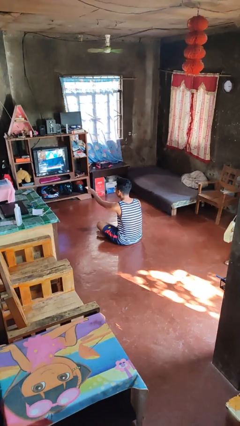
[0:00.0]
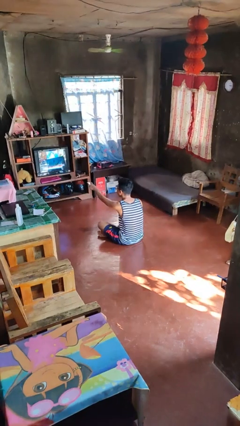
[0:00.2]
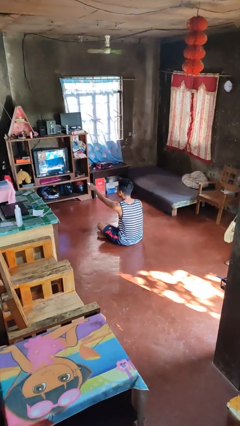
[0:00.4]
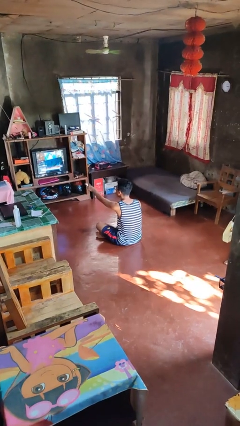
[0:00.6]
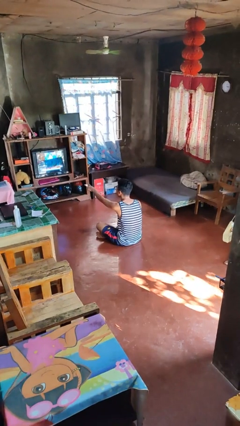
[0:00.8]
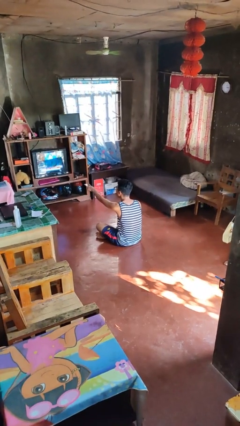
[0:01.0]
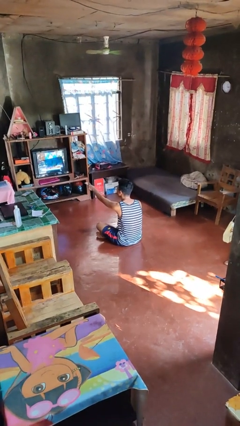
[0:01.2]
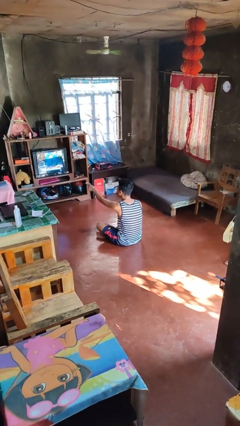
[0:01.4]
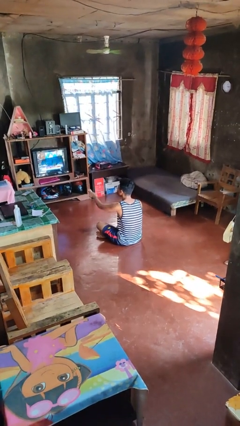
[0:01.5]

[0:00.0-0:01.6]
person uses television remote

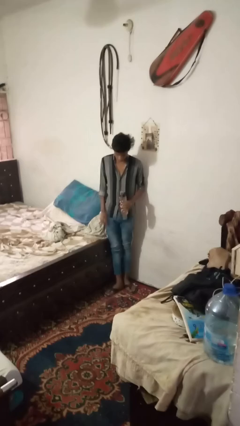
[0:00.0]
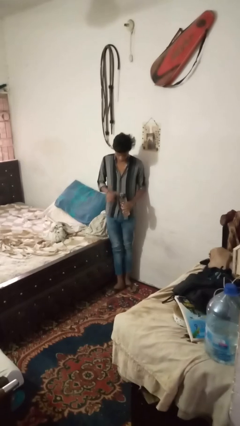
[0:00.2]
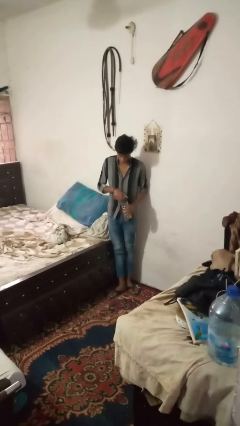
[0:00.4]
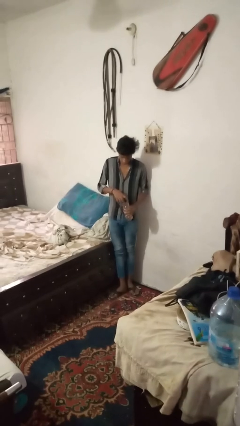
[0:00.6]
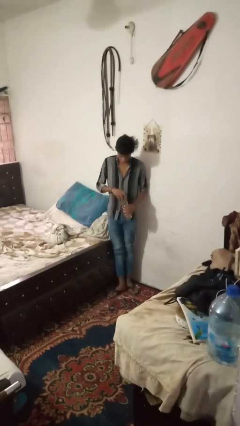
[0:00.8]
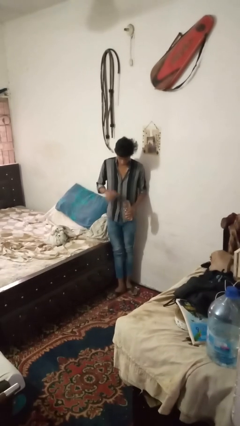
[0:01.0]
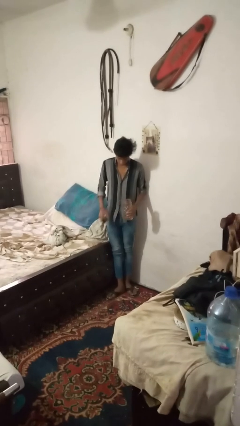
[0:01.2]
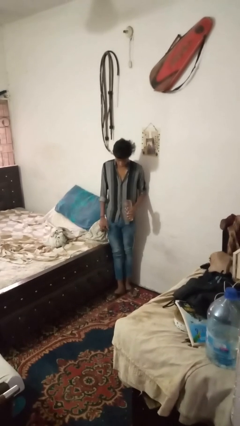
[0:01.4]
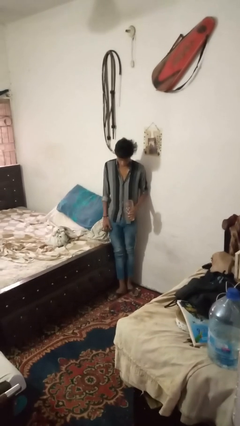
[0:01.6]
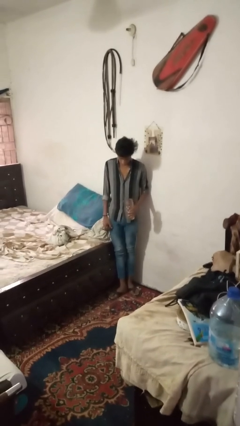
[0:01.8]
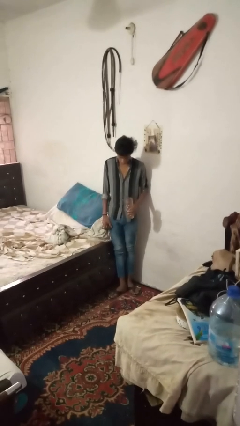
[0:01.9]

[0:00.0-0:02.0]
person unscrews lid from bottle

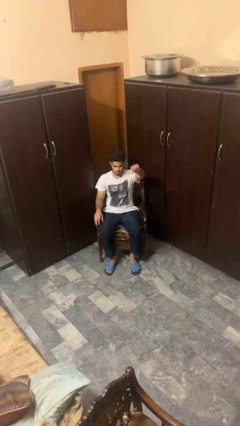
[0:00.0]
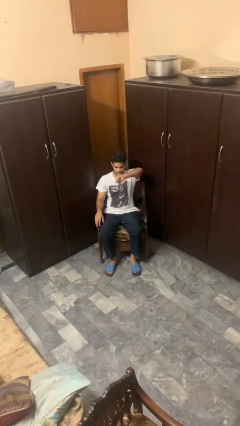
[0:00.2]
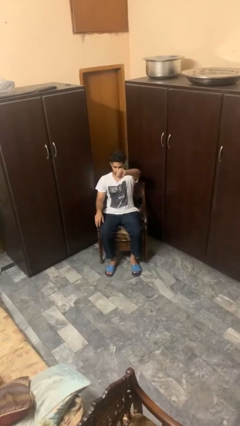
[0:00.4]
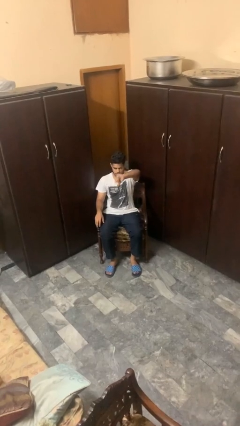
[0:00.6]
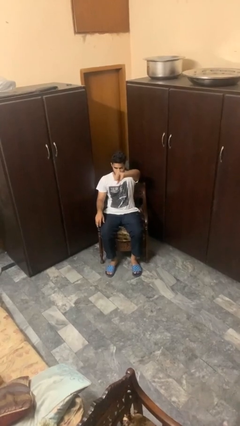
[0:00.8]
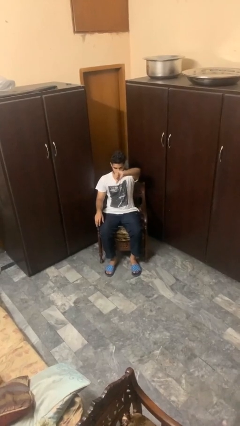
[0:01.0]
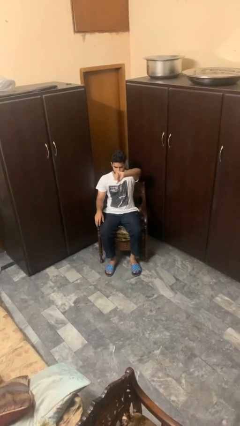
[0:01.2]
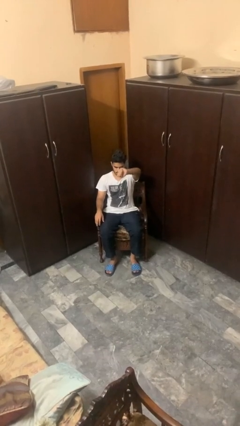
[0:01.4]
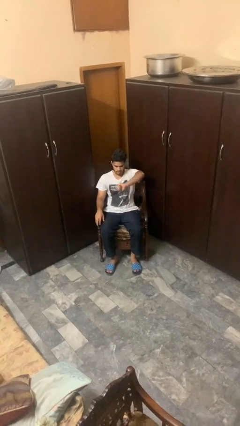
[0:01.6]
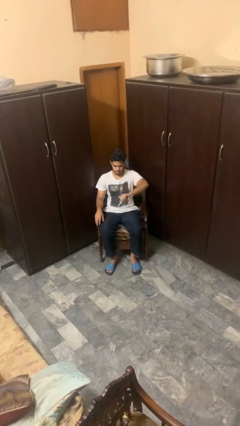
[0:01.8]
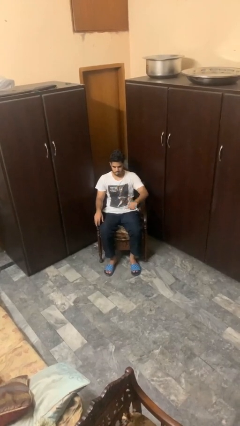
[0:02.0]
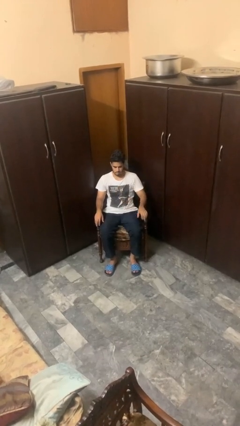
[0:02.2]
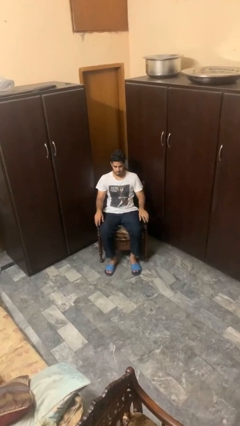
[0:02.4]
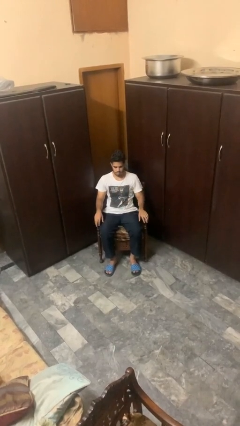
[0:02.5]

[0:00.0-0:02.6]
person gestures thumbs down

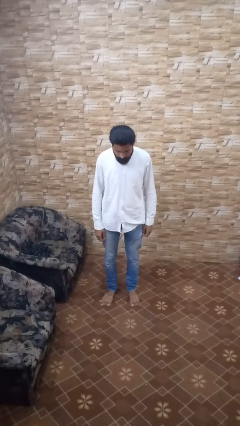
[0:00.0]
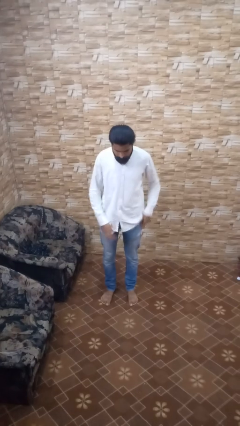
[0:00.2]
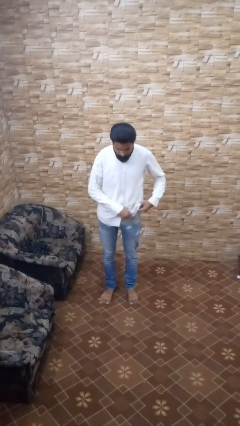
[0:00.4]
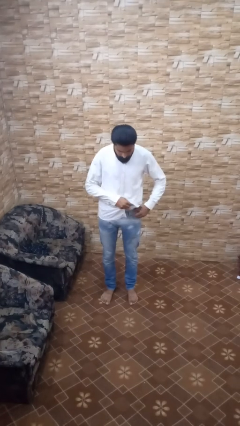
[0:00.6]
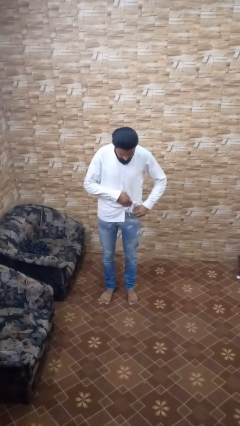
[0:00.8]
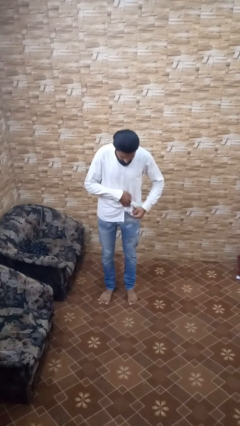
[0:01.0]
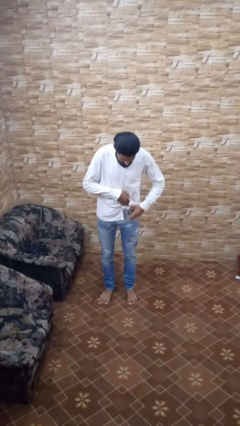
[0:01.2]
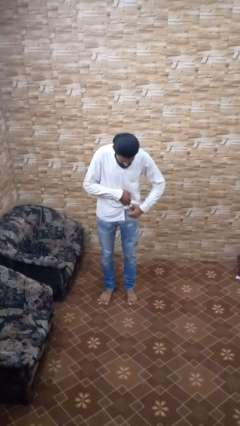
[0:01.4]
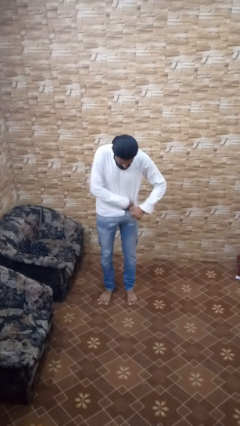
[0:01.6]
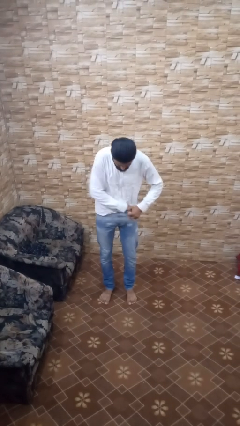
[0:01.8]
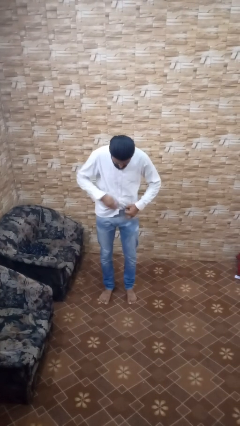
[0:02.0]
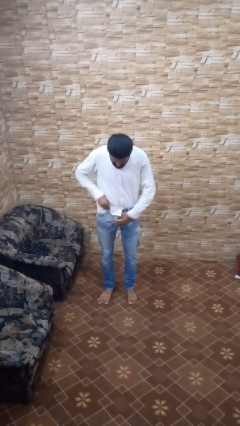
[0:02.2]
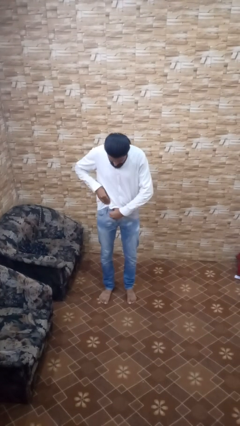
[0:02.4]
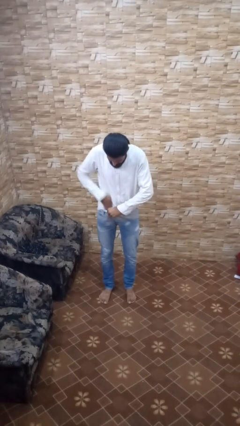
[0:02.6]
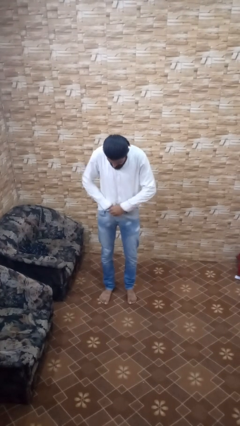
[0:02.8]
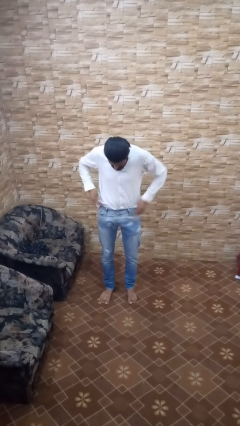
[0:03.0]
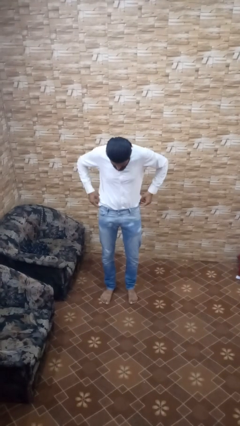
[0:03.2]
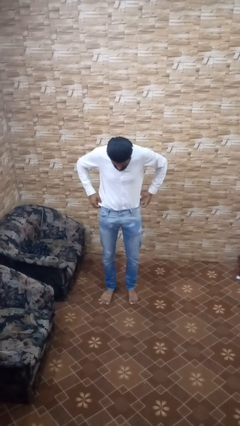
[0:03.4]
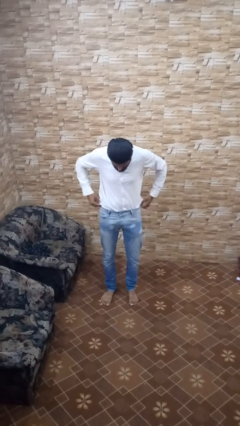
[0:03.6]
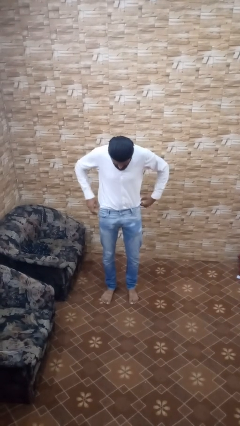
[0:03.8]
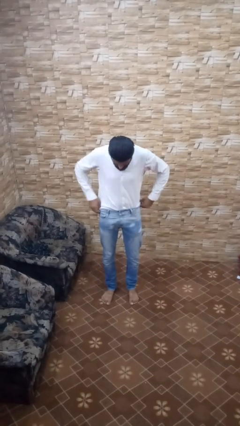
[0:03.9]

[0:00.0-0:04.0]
person tucks in shirt

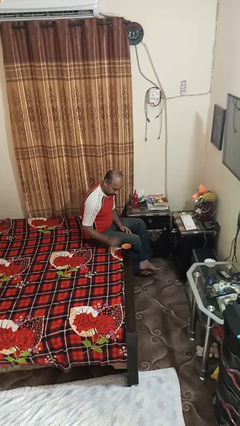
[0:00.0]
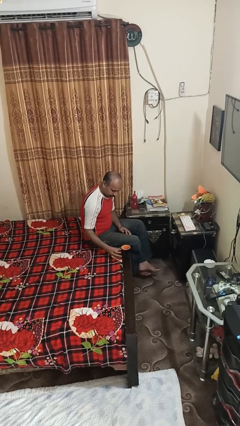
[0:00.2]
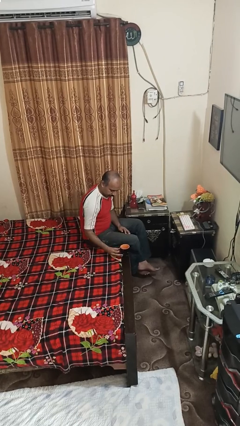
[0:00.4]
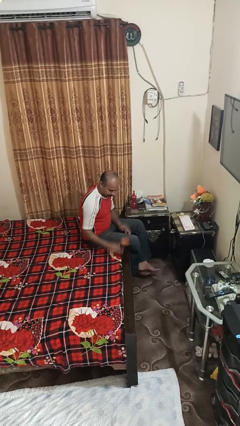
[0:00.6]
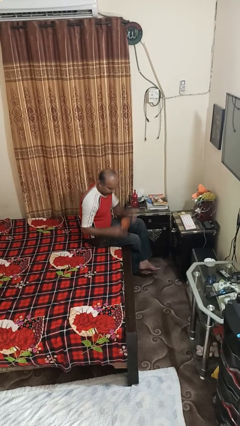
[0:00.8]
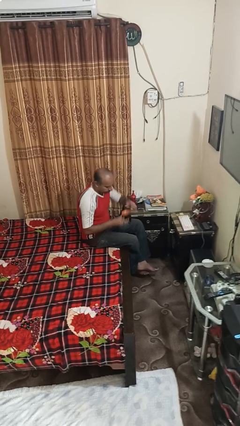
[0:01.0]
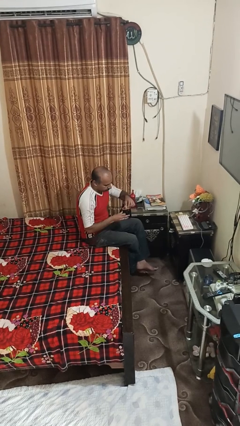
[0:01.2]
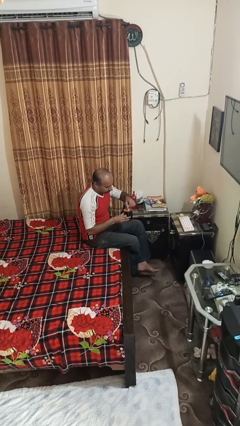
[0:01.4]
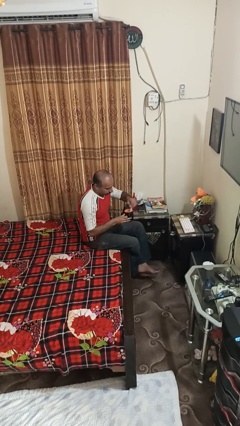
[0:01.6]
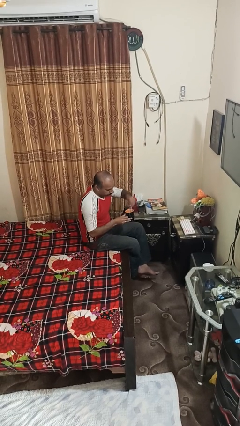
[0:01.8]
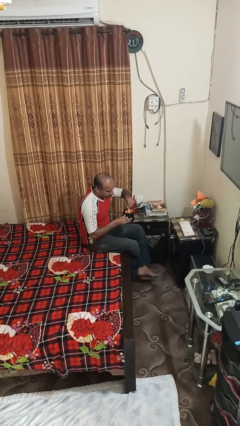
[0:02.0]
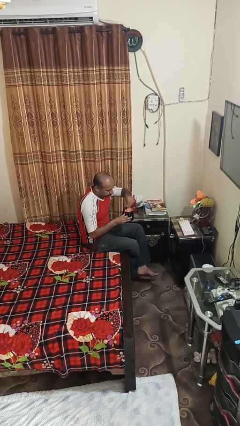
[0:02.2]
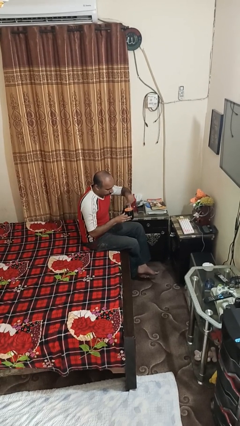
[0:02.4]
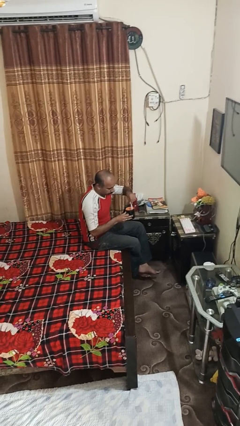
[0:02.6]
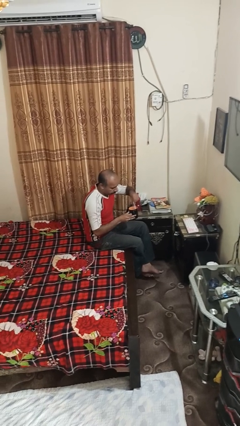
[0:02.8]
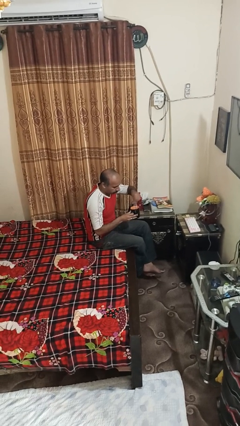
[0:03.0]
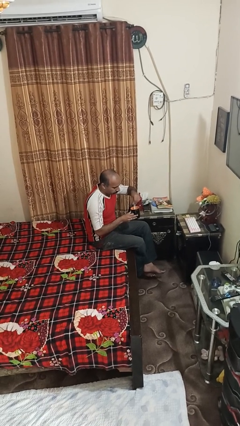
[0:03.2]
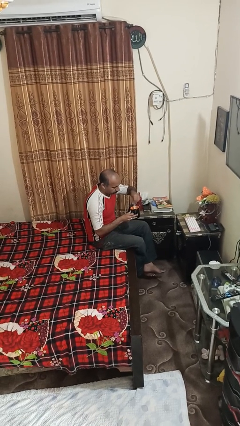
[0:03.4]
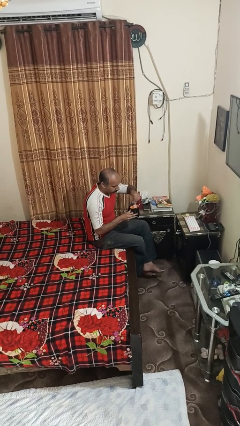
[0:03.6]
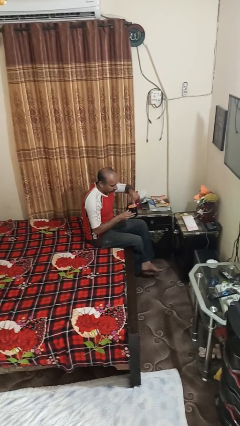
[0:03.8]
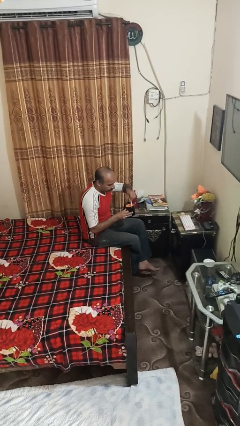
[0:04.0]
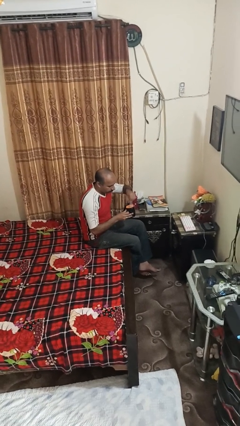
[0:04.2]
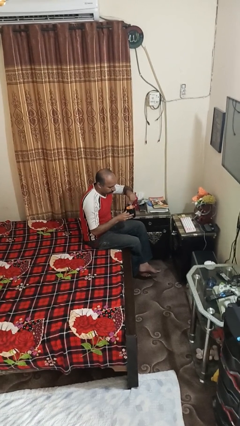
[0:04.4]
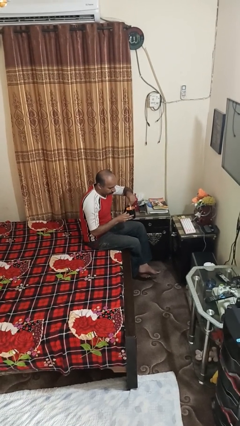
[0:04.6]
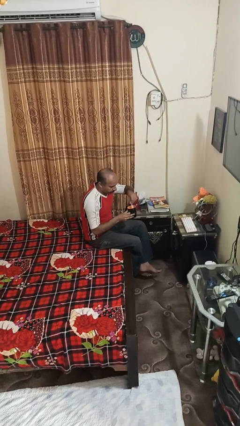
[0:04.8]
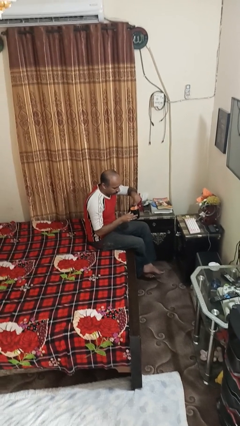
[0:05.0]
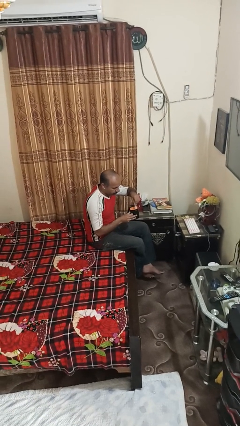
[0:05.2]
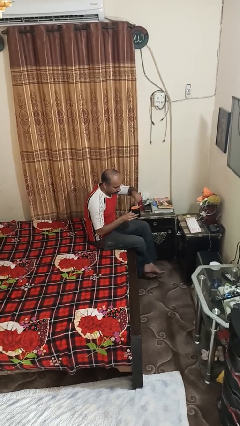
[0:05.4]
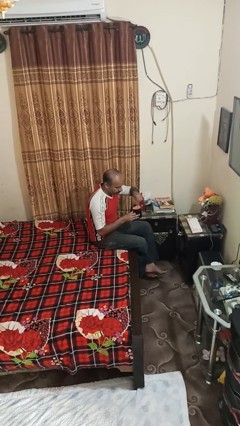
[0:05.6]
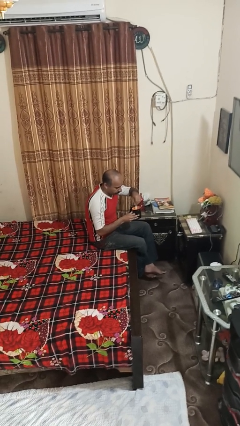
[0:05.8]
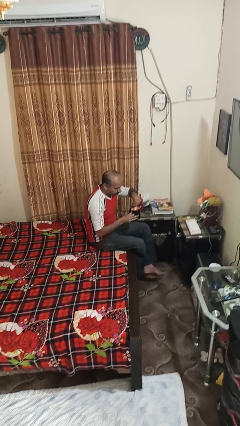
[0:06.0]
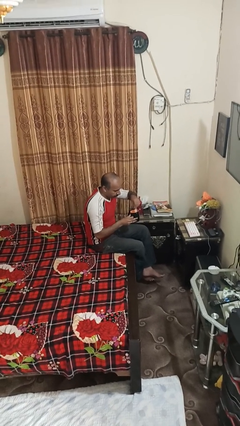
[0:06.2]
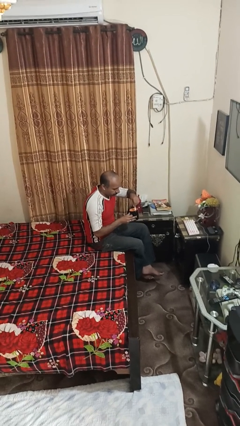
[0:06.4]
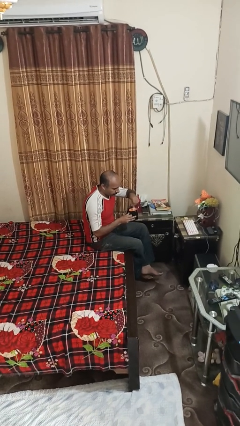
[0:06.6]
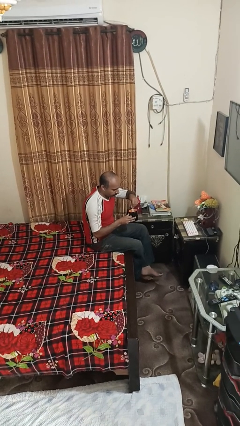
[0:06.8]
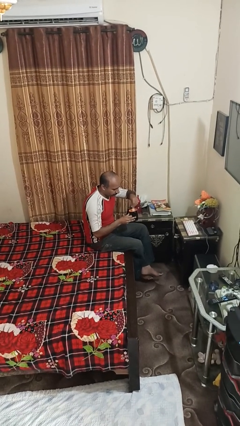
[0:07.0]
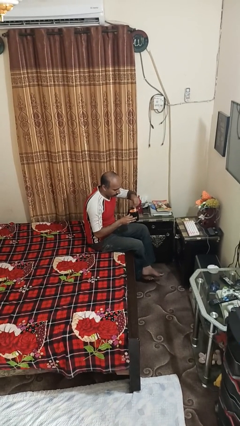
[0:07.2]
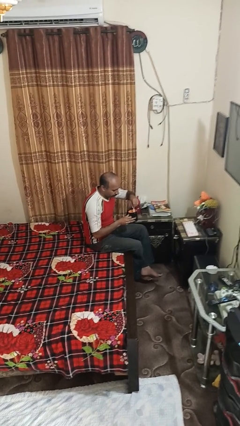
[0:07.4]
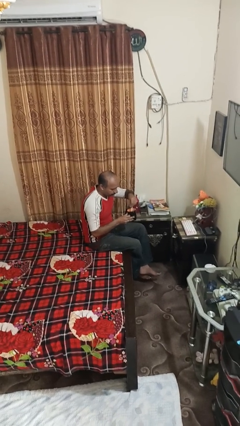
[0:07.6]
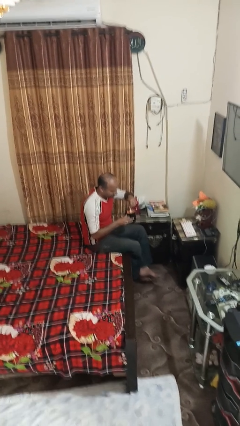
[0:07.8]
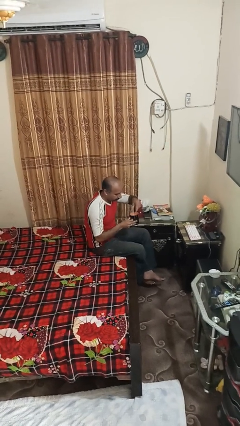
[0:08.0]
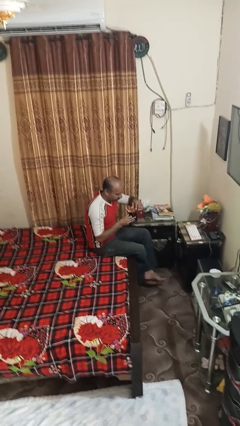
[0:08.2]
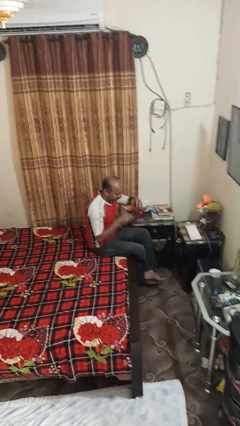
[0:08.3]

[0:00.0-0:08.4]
person stirs mug
